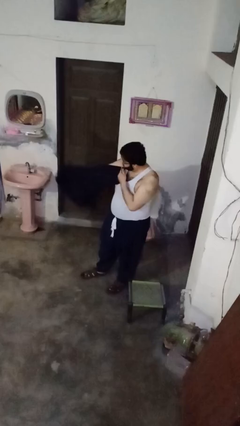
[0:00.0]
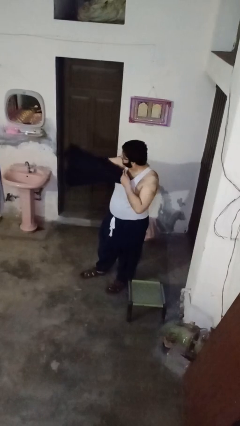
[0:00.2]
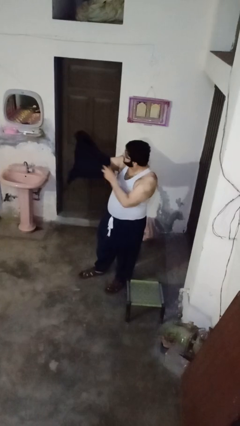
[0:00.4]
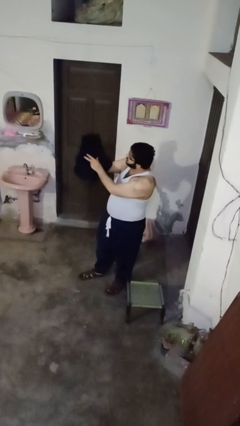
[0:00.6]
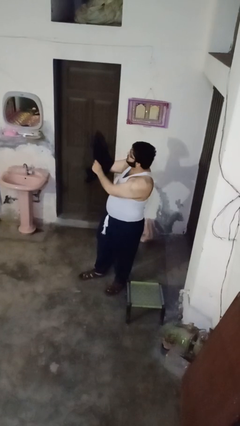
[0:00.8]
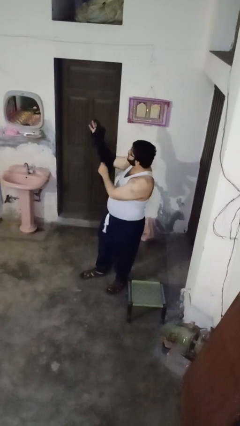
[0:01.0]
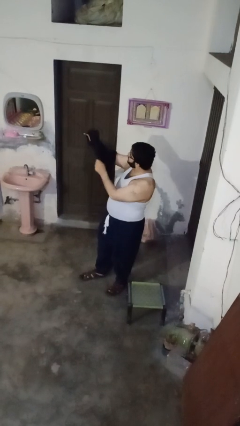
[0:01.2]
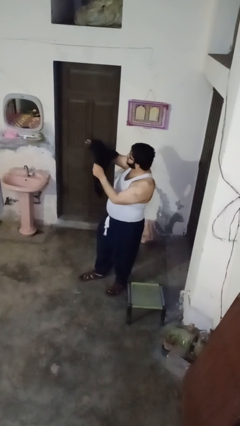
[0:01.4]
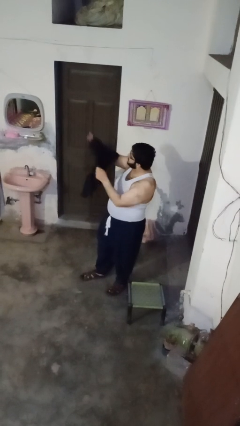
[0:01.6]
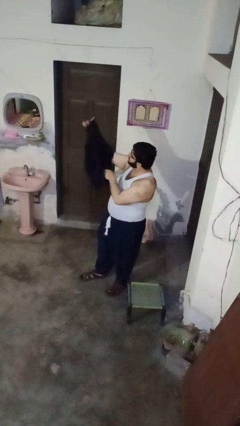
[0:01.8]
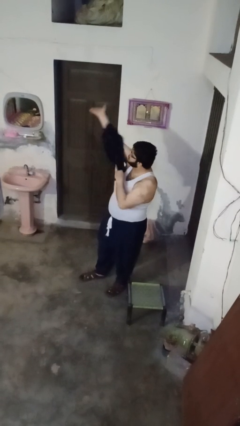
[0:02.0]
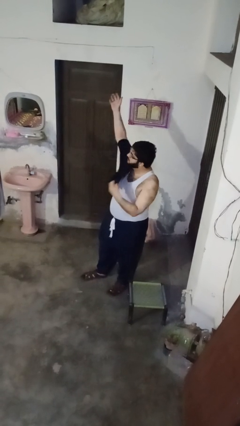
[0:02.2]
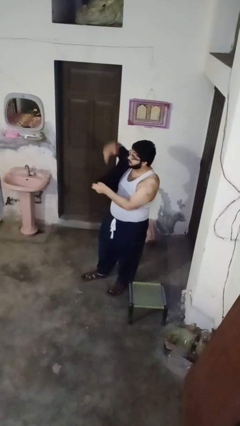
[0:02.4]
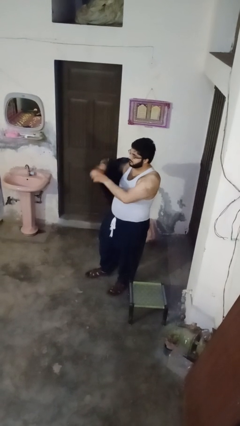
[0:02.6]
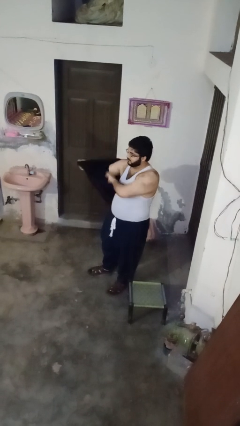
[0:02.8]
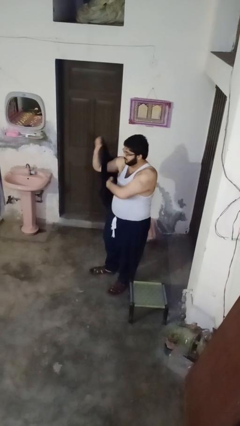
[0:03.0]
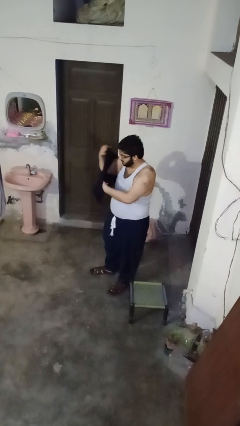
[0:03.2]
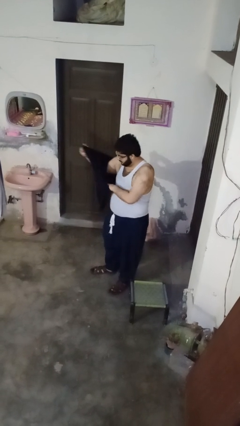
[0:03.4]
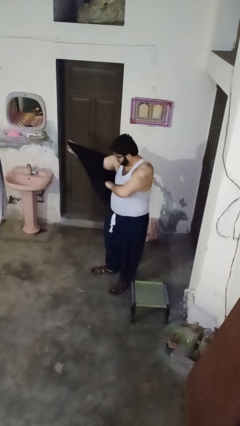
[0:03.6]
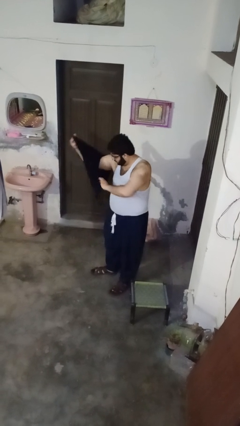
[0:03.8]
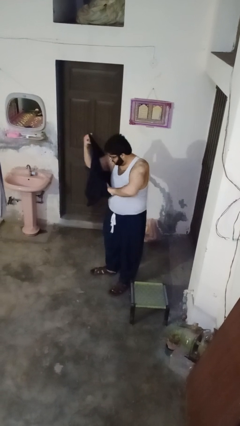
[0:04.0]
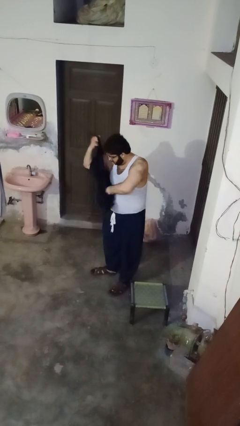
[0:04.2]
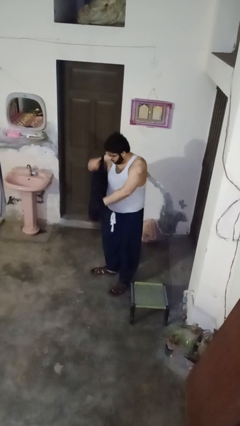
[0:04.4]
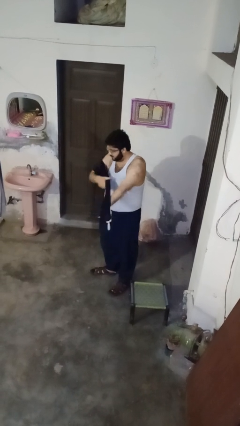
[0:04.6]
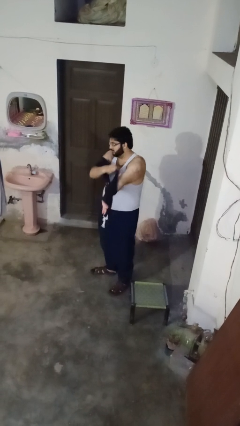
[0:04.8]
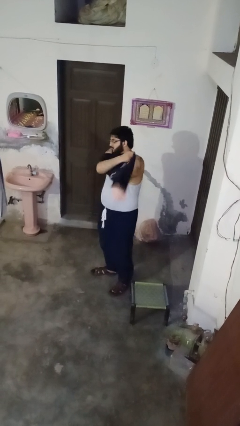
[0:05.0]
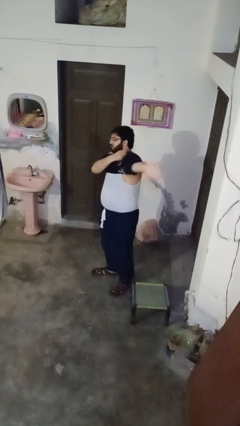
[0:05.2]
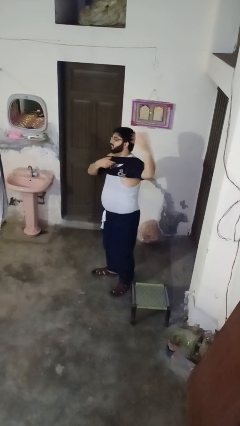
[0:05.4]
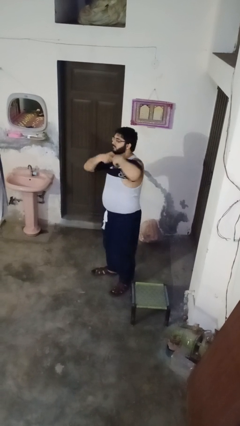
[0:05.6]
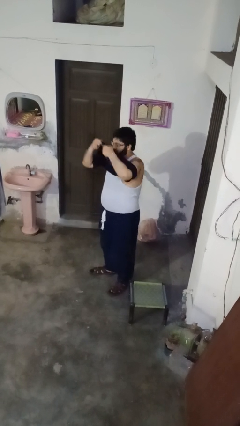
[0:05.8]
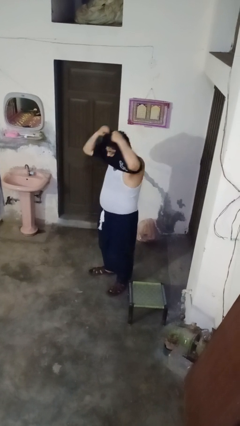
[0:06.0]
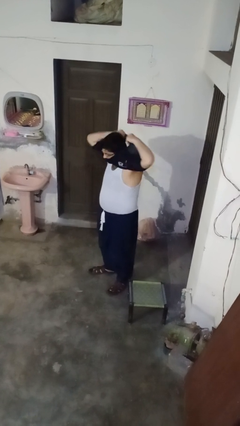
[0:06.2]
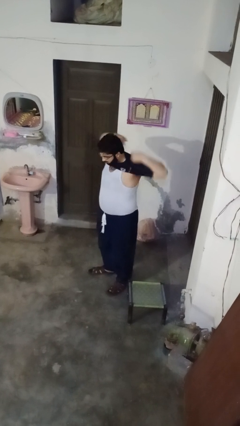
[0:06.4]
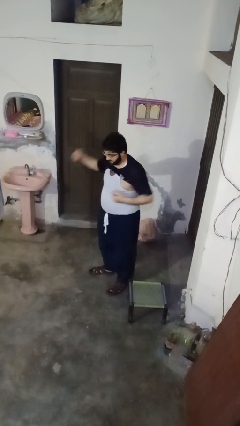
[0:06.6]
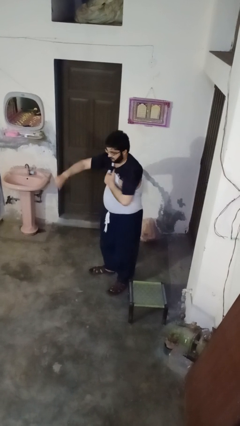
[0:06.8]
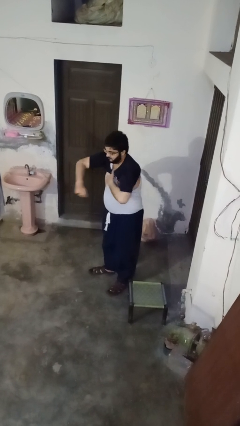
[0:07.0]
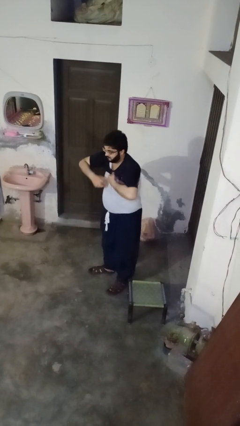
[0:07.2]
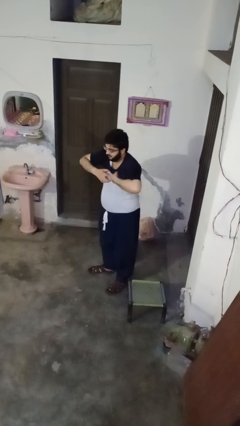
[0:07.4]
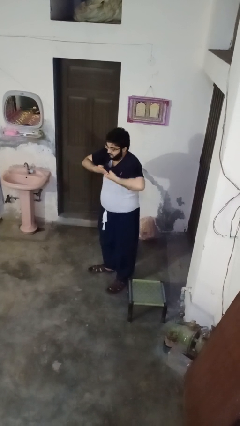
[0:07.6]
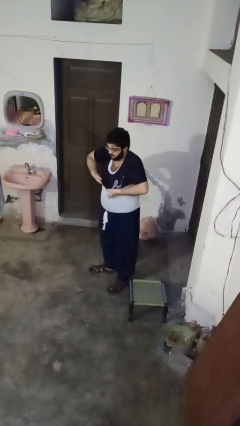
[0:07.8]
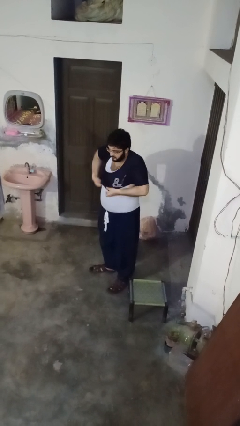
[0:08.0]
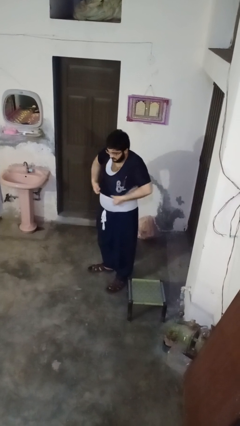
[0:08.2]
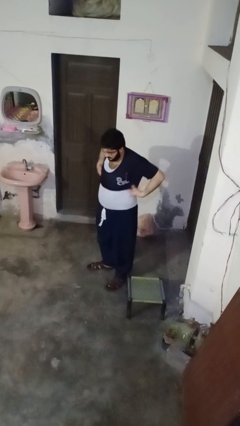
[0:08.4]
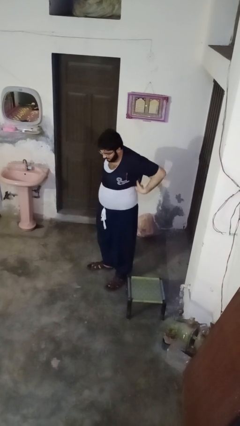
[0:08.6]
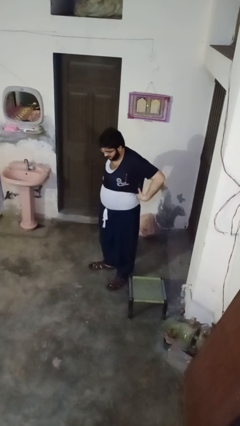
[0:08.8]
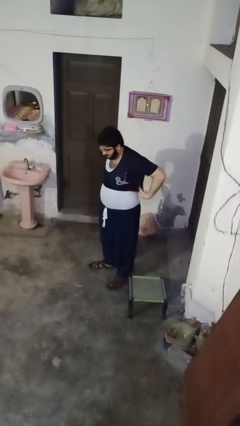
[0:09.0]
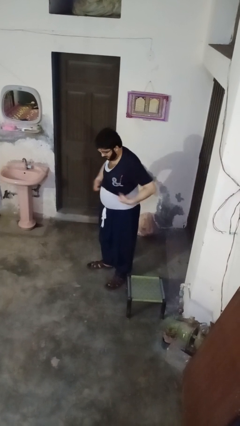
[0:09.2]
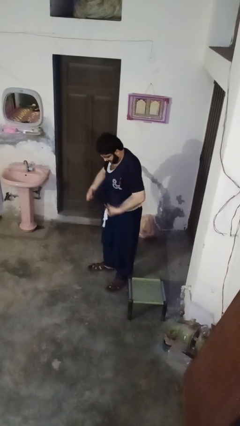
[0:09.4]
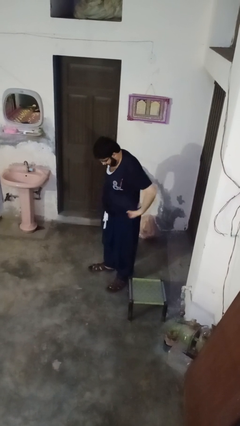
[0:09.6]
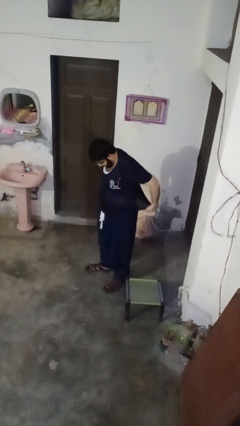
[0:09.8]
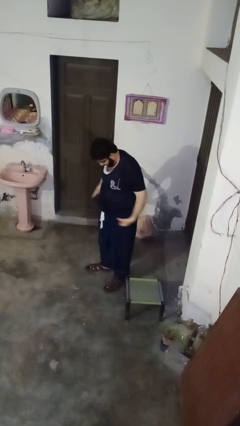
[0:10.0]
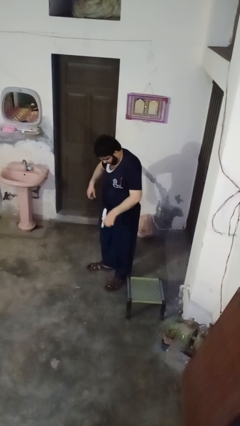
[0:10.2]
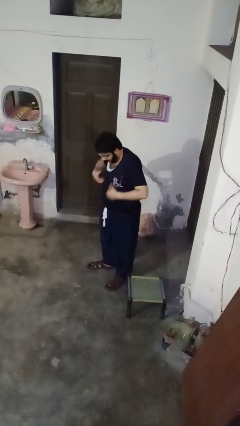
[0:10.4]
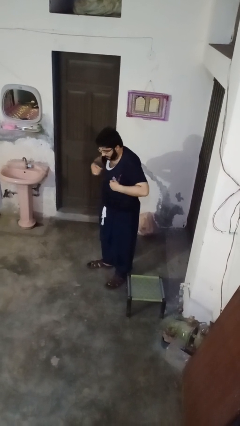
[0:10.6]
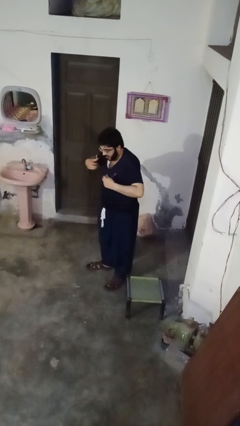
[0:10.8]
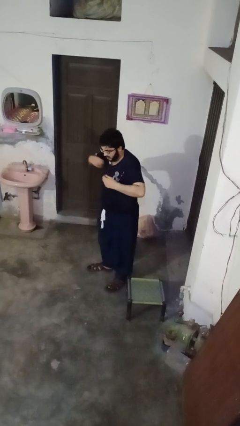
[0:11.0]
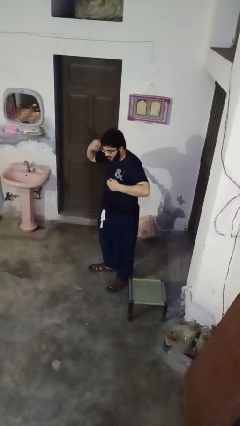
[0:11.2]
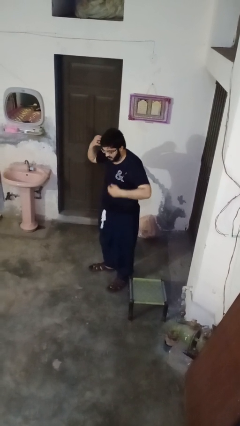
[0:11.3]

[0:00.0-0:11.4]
person puts on shirt

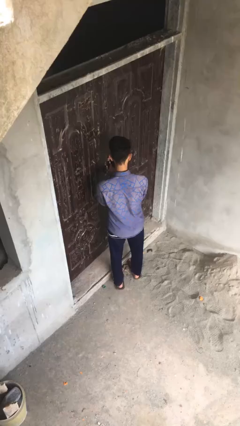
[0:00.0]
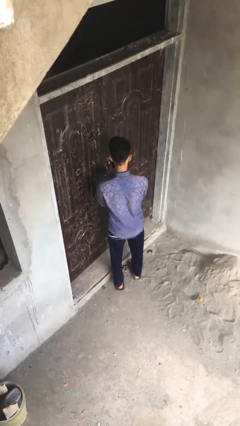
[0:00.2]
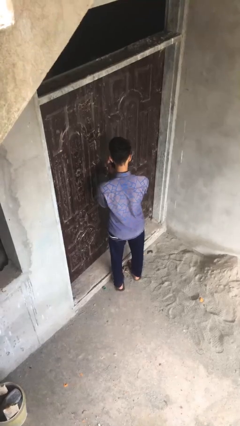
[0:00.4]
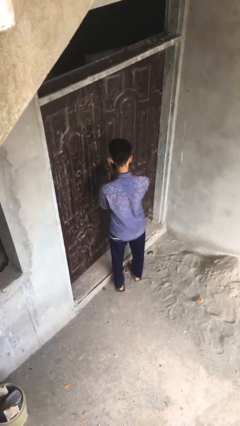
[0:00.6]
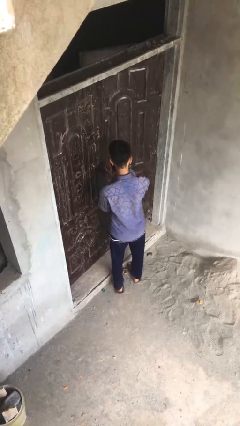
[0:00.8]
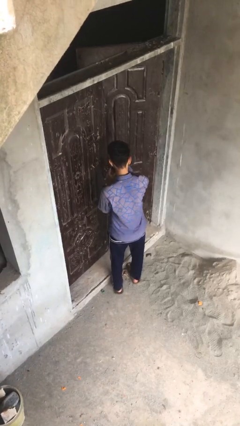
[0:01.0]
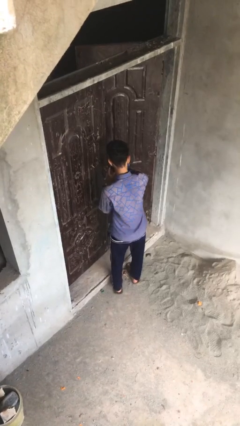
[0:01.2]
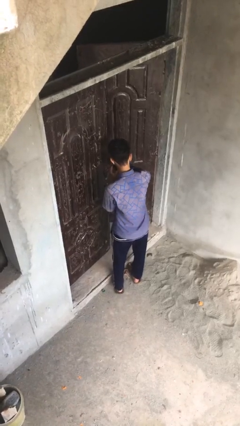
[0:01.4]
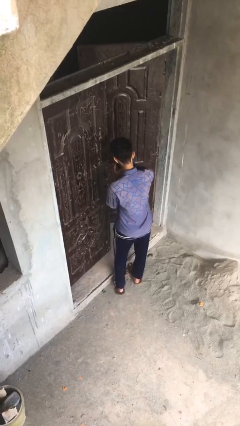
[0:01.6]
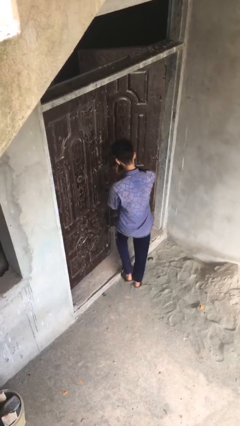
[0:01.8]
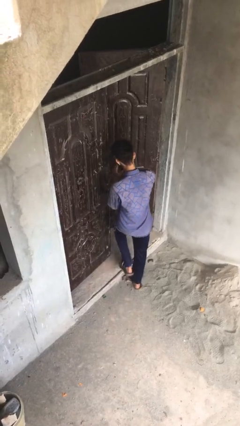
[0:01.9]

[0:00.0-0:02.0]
person opens facility door

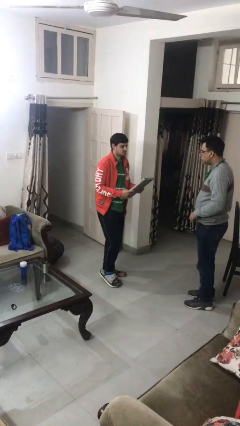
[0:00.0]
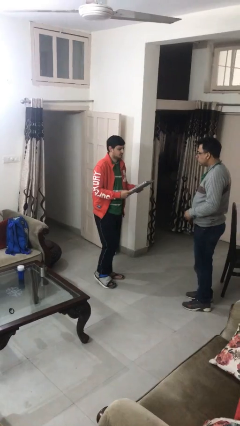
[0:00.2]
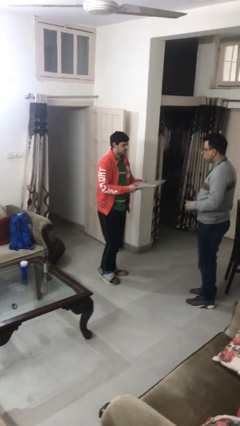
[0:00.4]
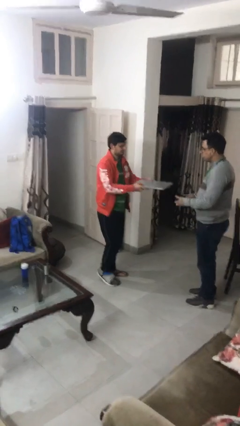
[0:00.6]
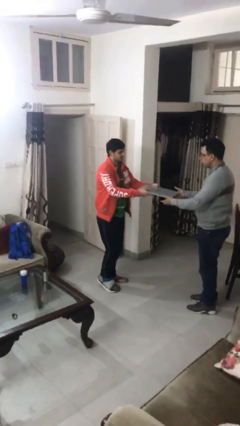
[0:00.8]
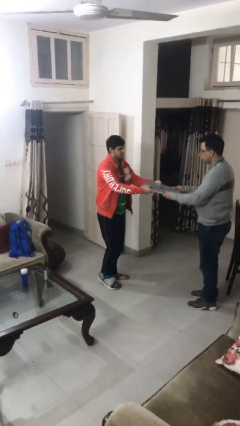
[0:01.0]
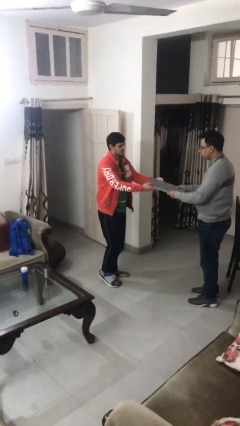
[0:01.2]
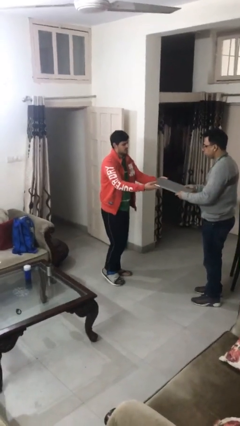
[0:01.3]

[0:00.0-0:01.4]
person transfers object to person

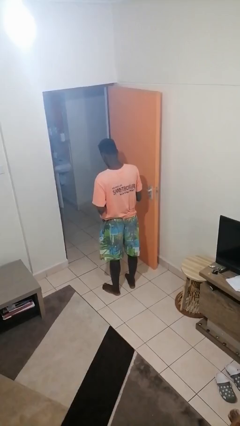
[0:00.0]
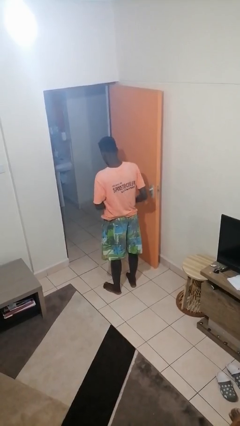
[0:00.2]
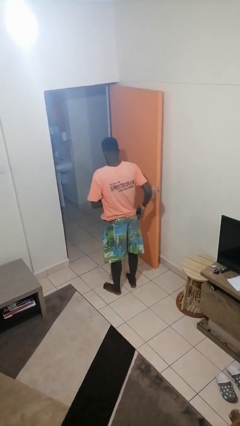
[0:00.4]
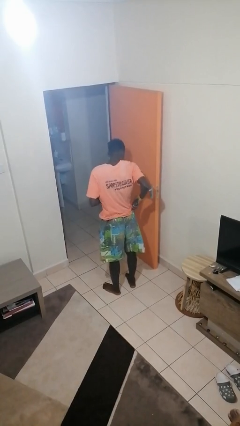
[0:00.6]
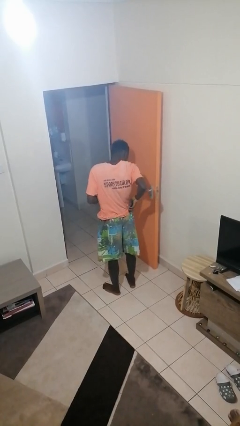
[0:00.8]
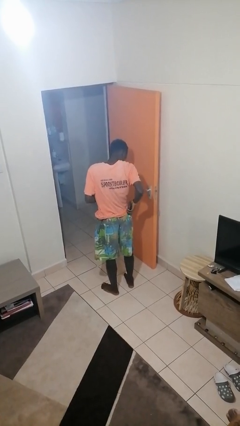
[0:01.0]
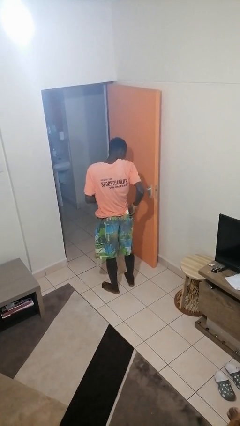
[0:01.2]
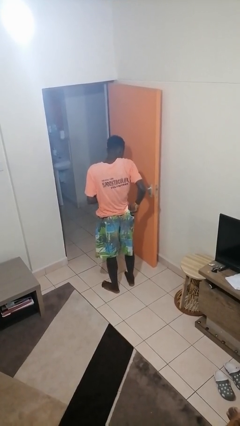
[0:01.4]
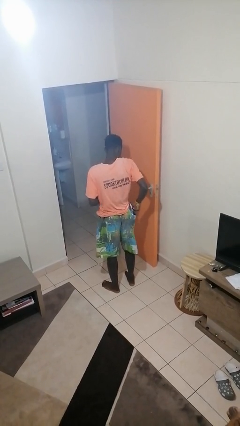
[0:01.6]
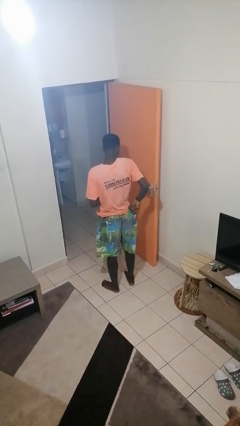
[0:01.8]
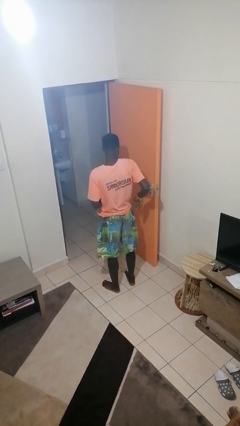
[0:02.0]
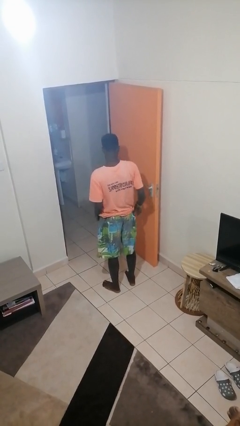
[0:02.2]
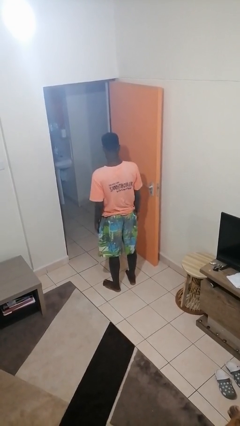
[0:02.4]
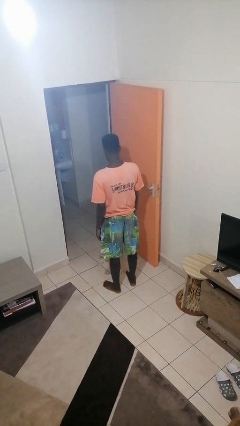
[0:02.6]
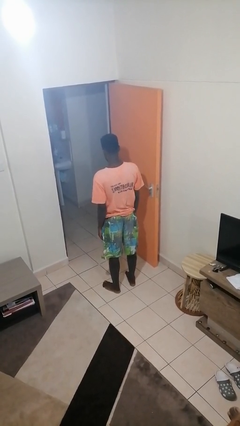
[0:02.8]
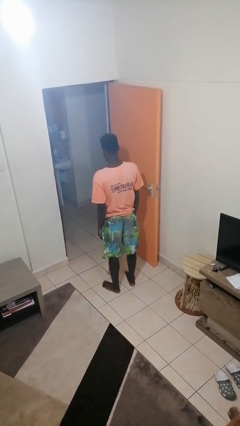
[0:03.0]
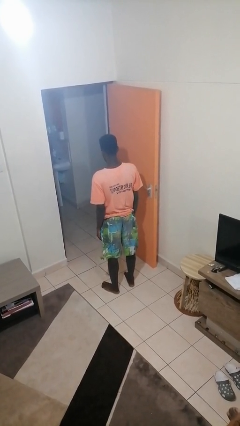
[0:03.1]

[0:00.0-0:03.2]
person puts phone into pocket
